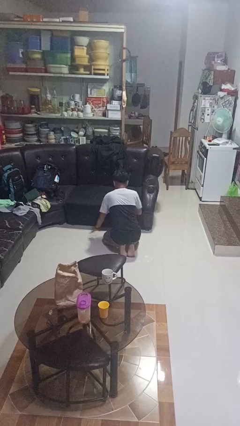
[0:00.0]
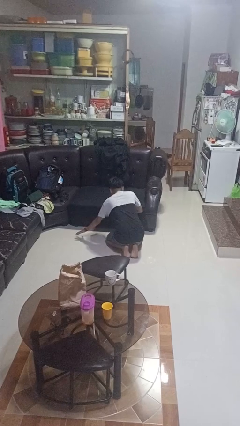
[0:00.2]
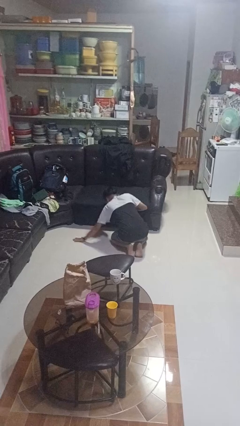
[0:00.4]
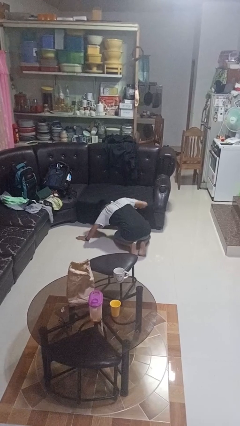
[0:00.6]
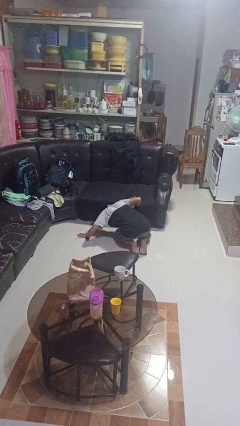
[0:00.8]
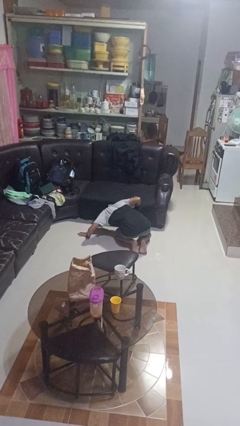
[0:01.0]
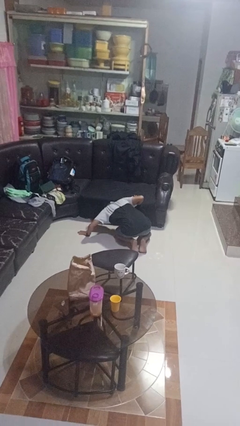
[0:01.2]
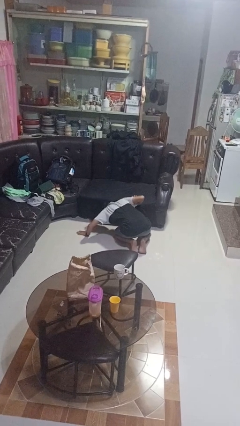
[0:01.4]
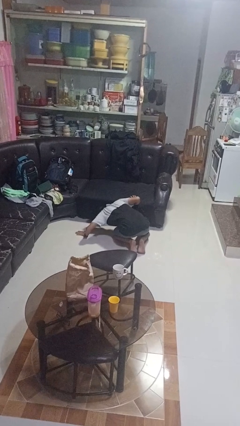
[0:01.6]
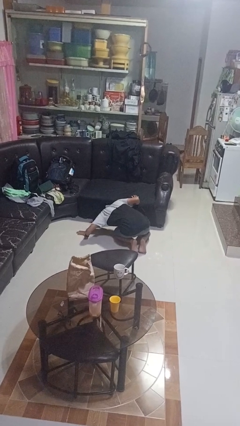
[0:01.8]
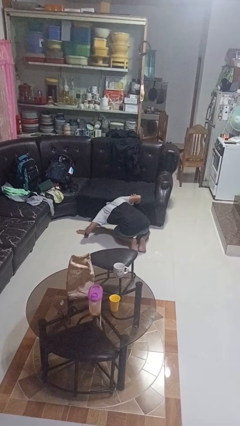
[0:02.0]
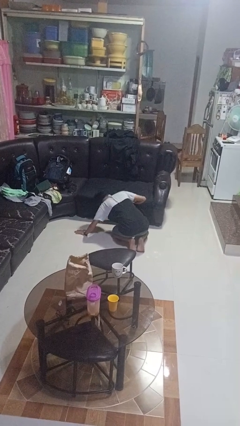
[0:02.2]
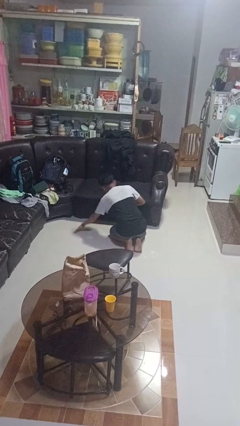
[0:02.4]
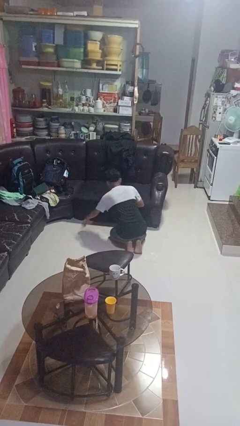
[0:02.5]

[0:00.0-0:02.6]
person searches under couch

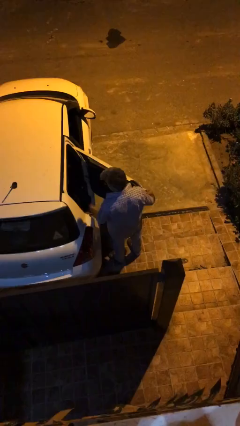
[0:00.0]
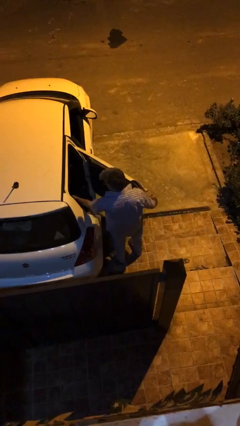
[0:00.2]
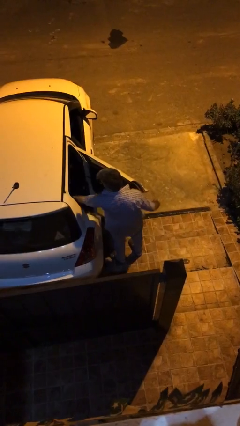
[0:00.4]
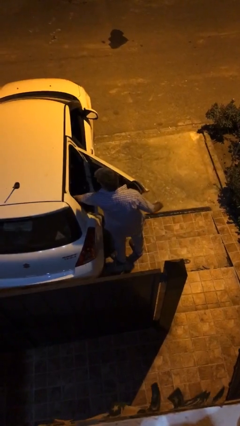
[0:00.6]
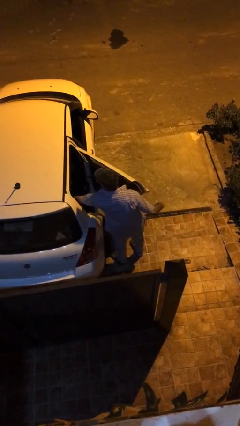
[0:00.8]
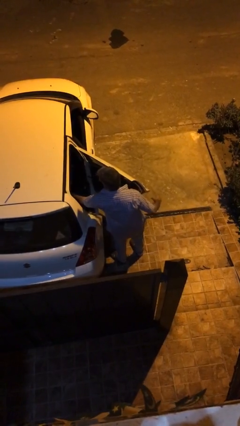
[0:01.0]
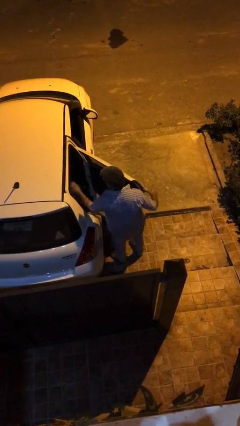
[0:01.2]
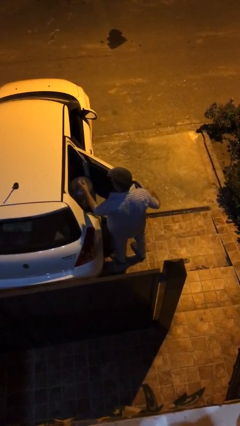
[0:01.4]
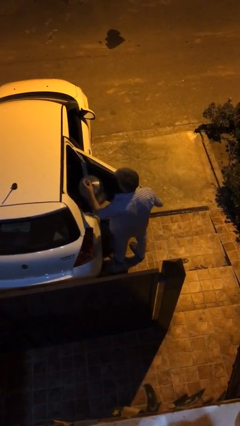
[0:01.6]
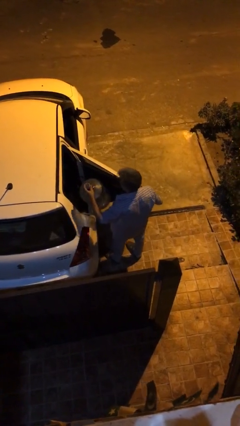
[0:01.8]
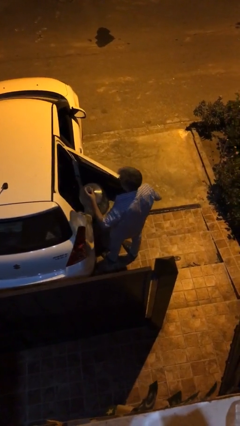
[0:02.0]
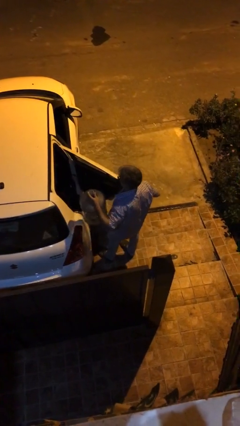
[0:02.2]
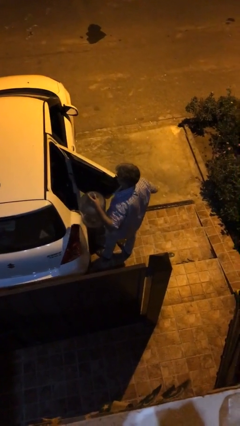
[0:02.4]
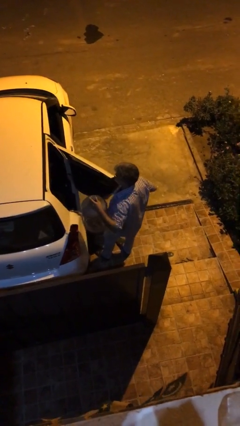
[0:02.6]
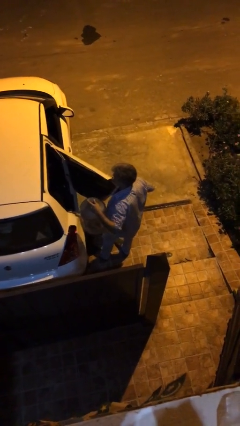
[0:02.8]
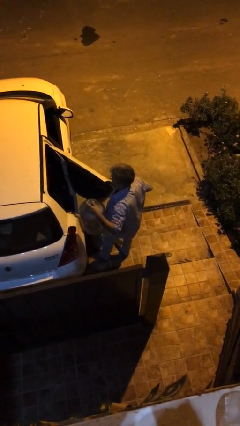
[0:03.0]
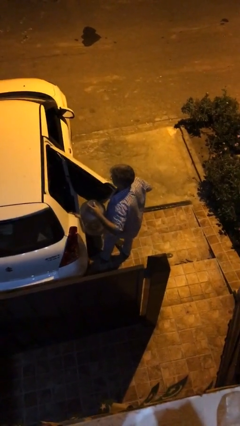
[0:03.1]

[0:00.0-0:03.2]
person unloads car

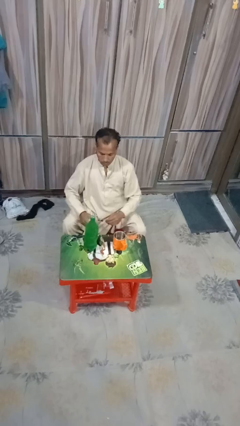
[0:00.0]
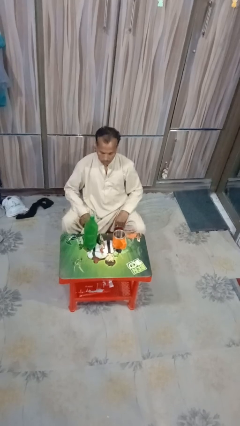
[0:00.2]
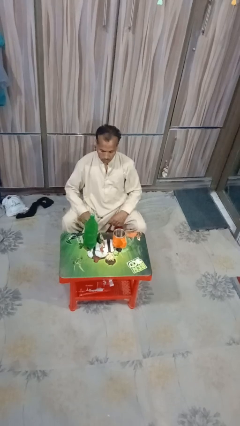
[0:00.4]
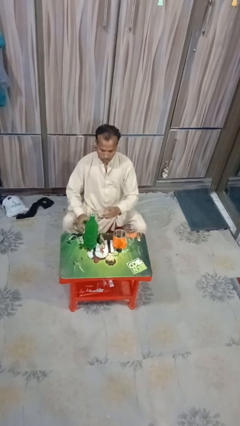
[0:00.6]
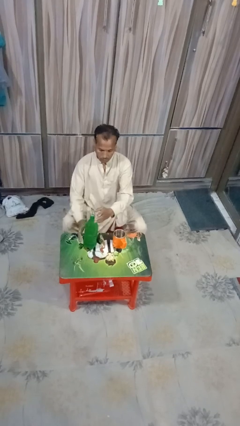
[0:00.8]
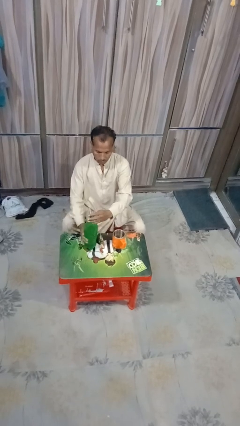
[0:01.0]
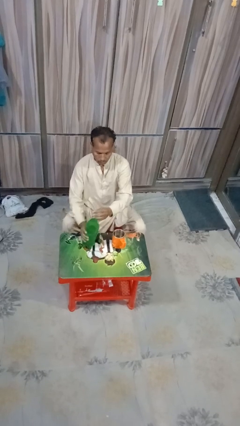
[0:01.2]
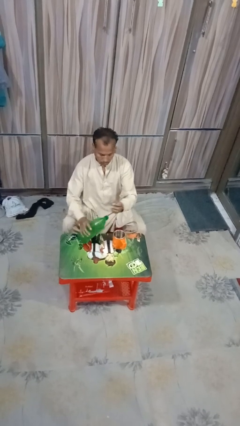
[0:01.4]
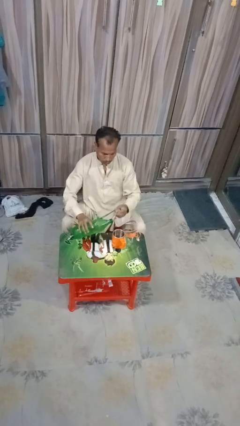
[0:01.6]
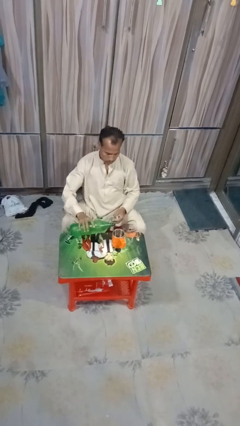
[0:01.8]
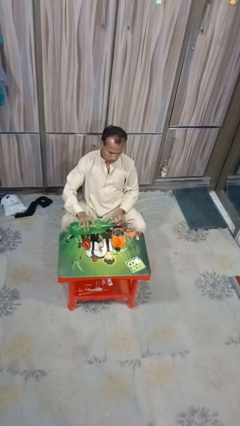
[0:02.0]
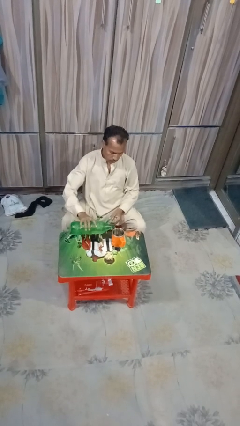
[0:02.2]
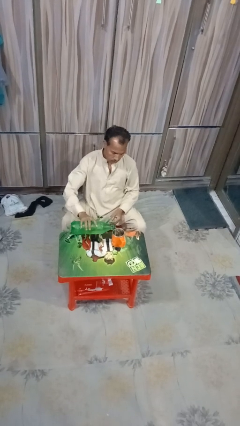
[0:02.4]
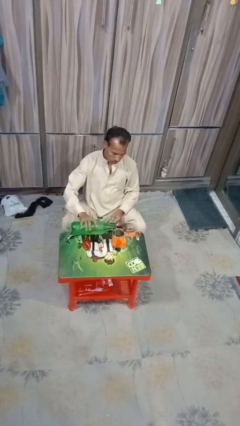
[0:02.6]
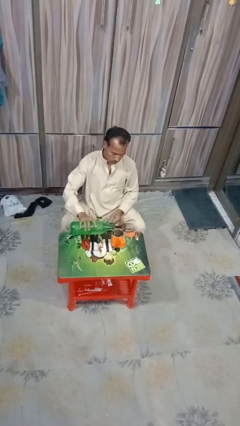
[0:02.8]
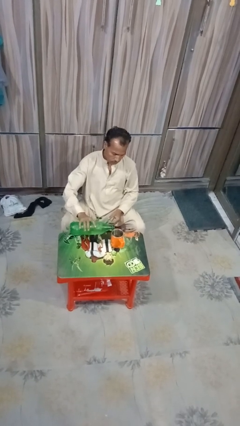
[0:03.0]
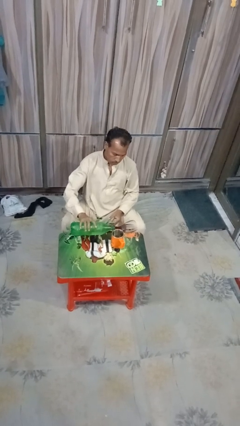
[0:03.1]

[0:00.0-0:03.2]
person pours liquid into cup

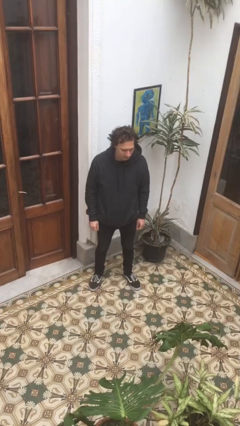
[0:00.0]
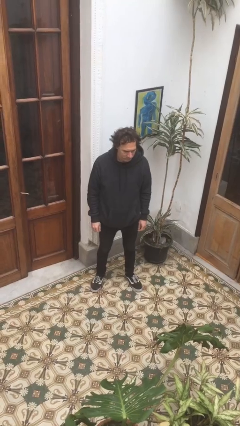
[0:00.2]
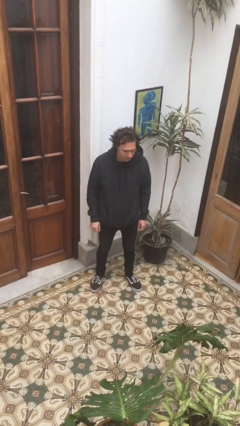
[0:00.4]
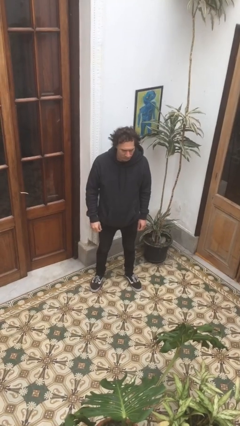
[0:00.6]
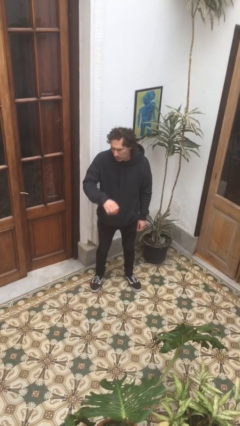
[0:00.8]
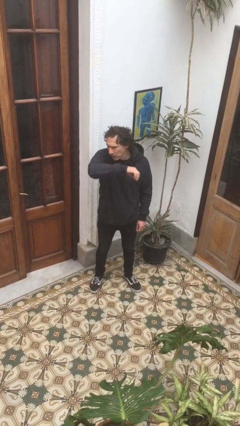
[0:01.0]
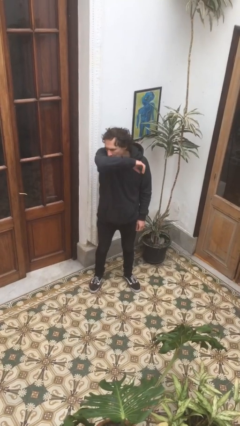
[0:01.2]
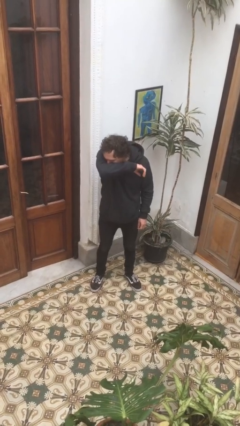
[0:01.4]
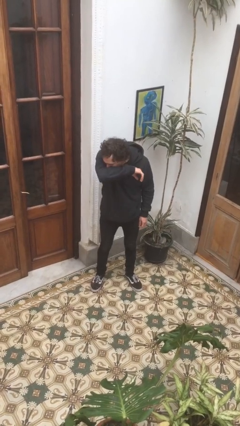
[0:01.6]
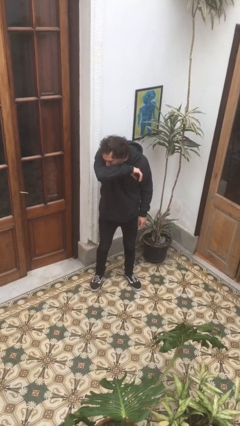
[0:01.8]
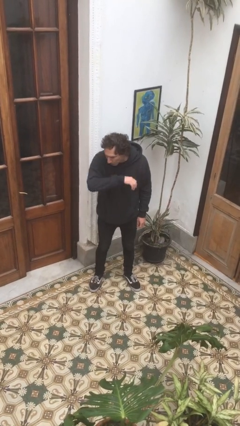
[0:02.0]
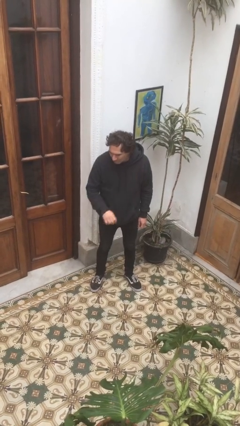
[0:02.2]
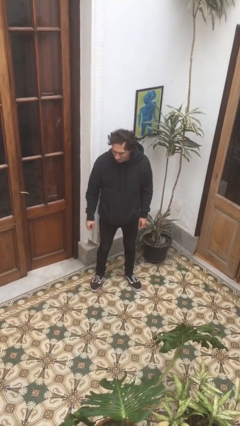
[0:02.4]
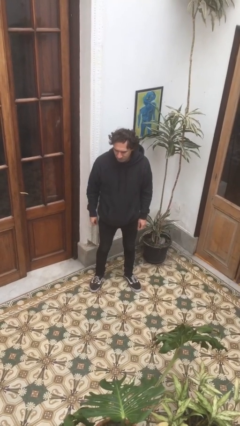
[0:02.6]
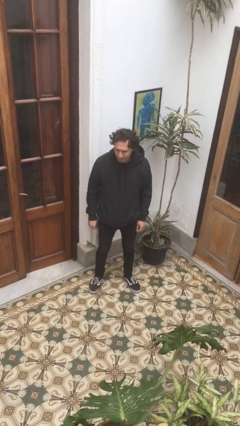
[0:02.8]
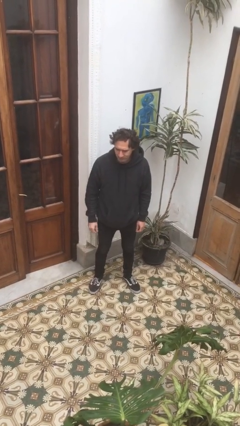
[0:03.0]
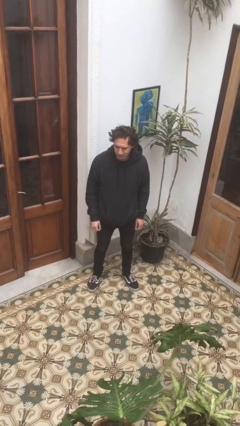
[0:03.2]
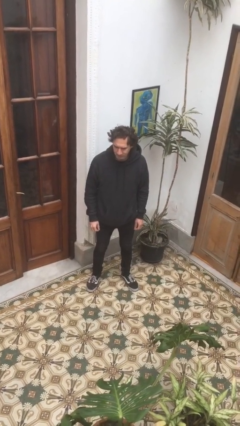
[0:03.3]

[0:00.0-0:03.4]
person sneezes into arm

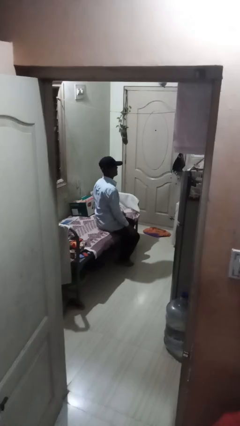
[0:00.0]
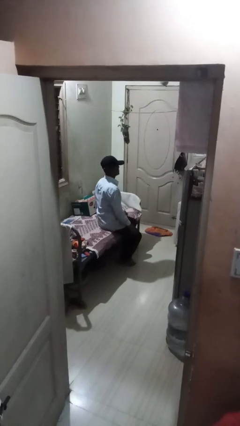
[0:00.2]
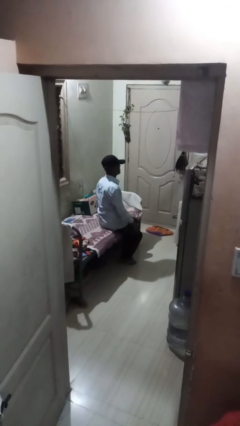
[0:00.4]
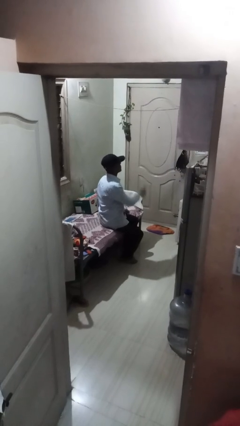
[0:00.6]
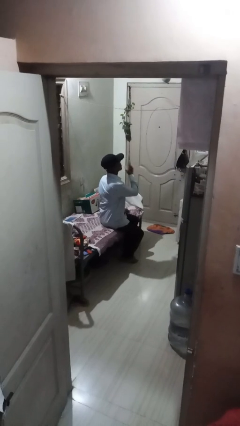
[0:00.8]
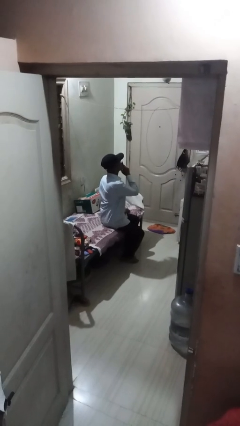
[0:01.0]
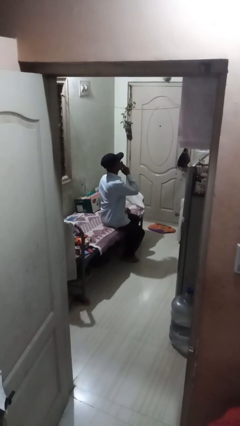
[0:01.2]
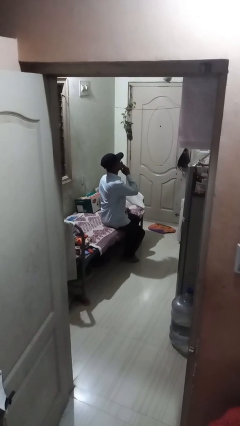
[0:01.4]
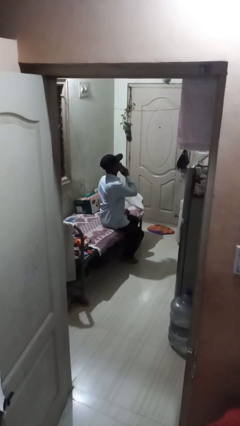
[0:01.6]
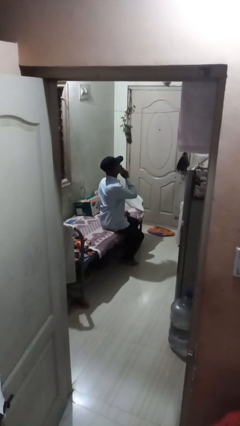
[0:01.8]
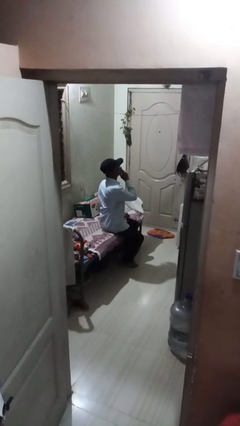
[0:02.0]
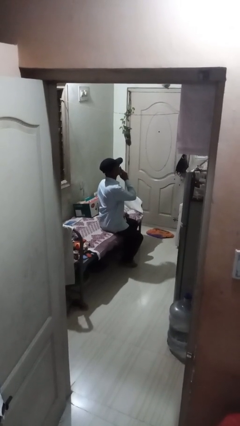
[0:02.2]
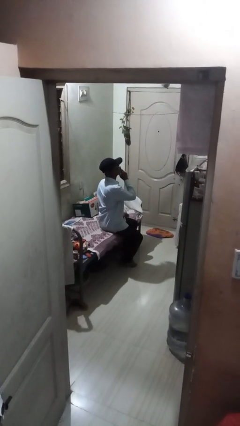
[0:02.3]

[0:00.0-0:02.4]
person gestures be quiet

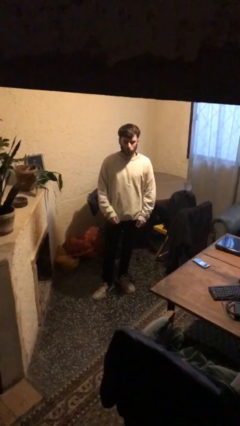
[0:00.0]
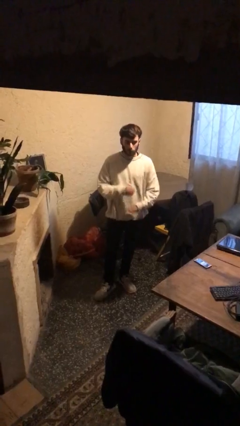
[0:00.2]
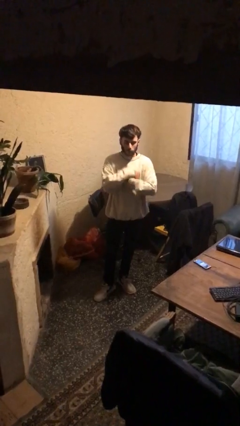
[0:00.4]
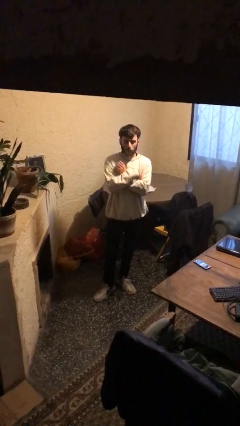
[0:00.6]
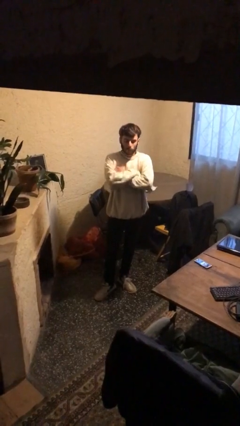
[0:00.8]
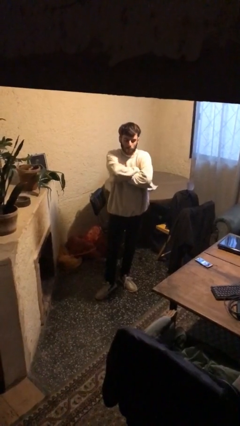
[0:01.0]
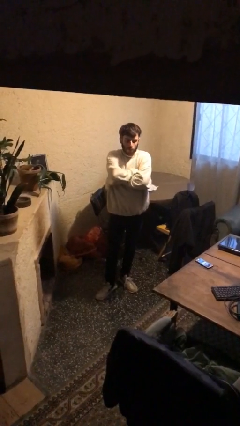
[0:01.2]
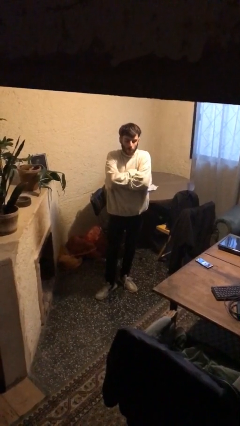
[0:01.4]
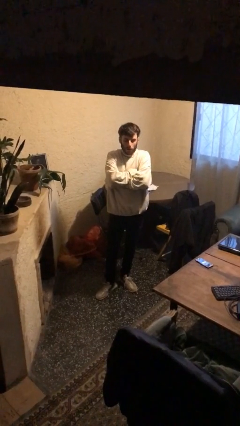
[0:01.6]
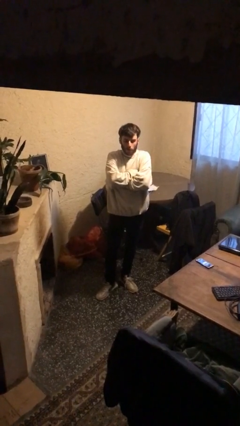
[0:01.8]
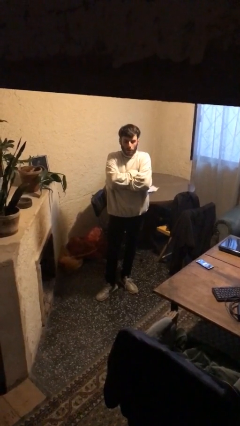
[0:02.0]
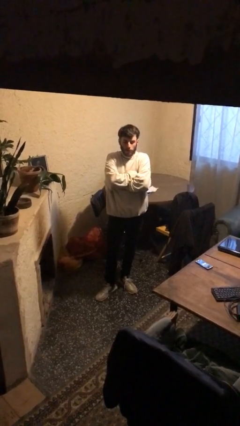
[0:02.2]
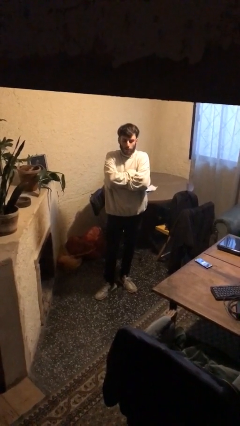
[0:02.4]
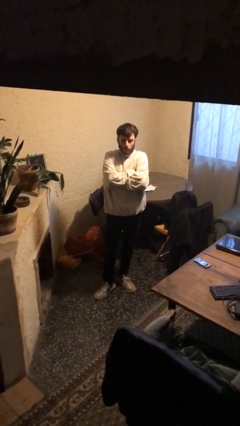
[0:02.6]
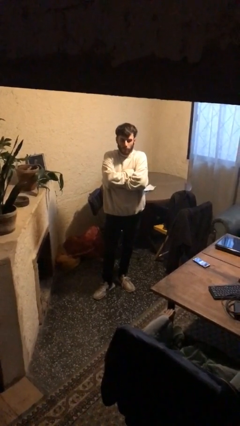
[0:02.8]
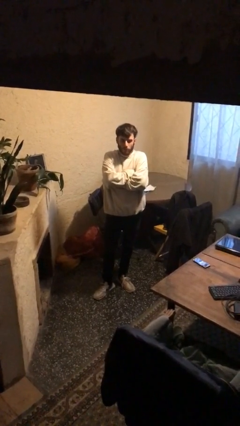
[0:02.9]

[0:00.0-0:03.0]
person crosses arms
